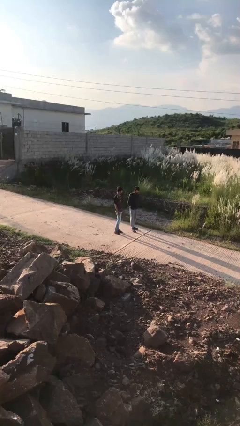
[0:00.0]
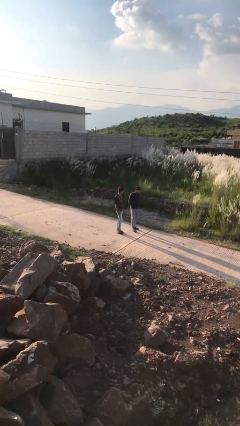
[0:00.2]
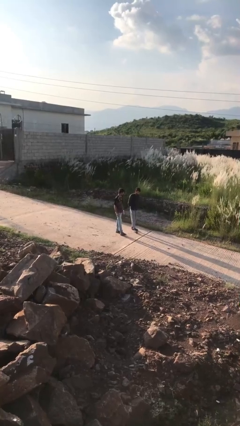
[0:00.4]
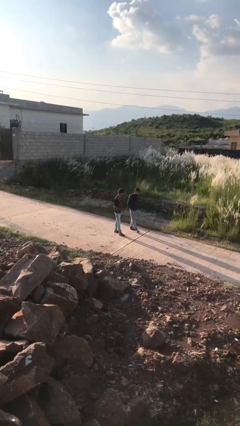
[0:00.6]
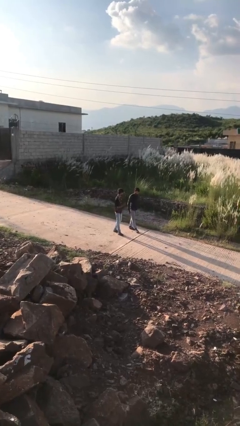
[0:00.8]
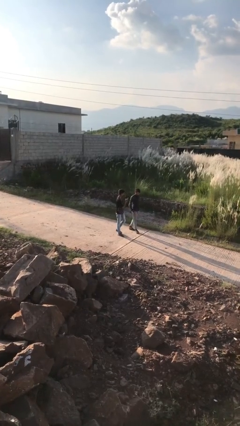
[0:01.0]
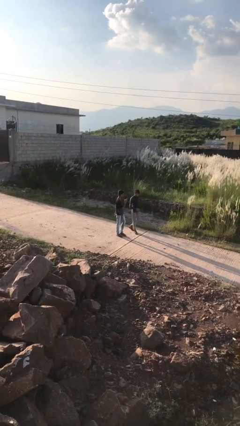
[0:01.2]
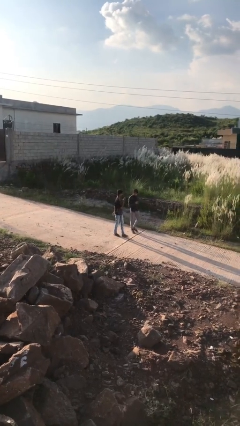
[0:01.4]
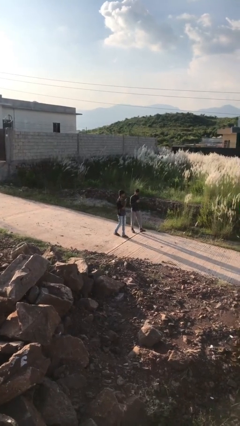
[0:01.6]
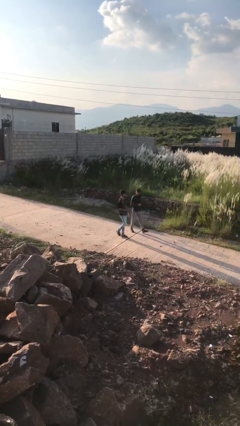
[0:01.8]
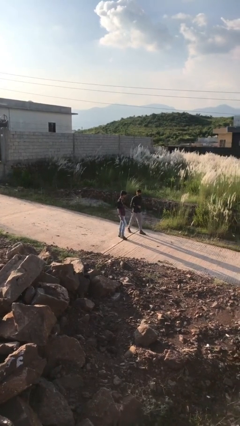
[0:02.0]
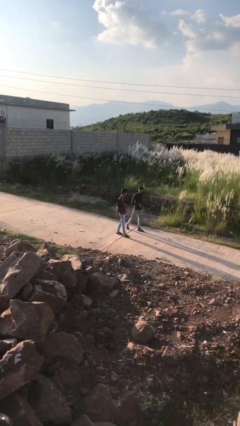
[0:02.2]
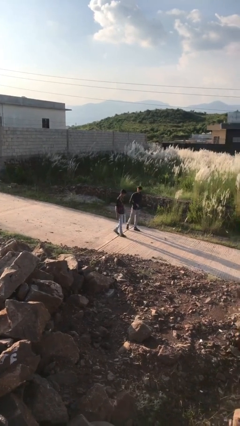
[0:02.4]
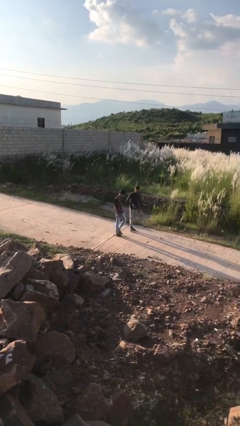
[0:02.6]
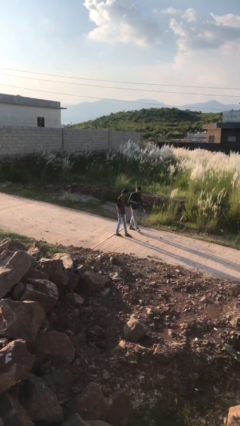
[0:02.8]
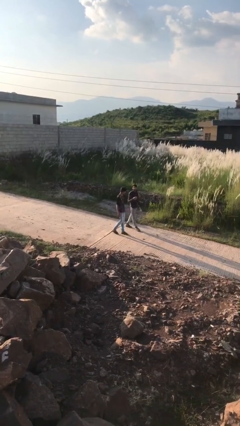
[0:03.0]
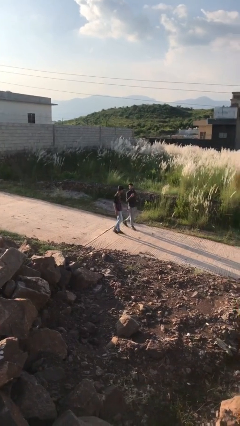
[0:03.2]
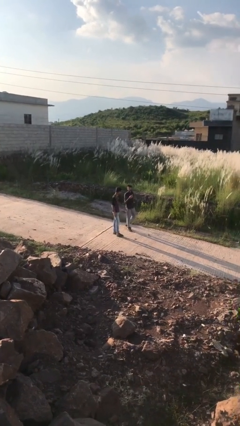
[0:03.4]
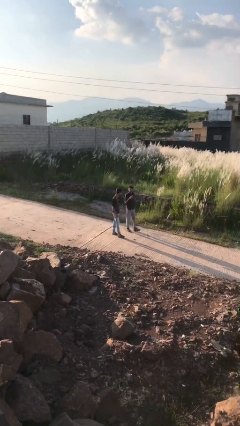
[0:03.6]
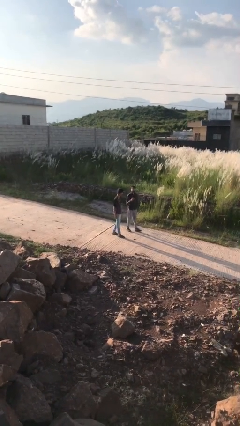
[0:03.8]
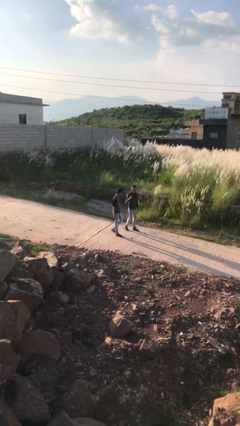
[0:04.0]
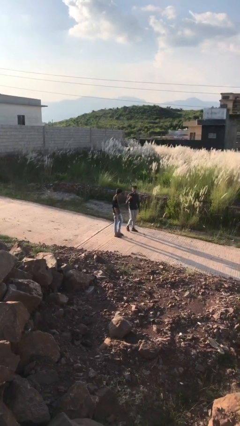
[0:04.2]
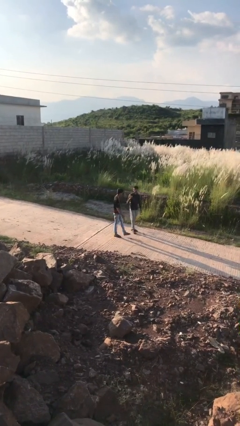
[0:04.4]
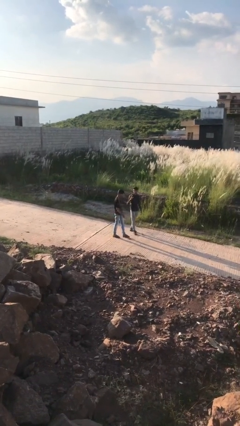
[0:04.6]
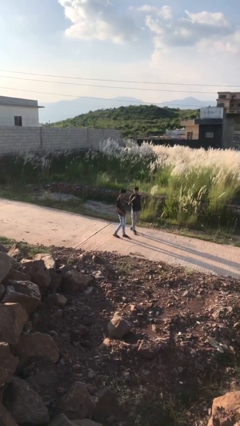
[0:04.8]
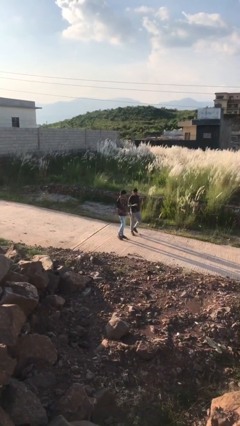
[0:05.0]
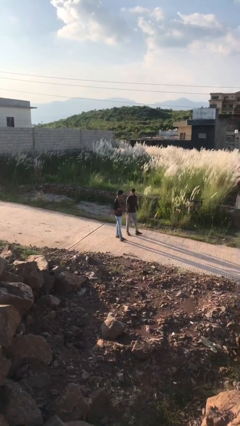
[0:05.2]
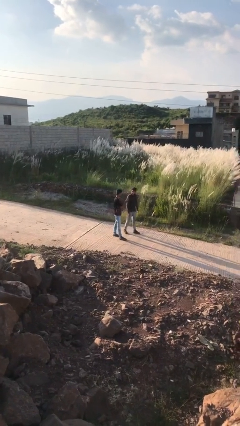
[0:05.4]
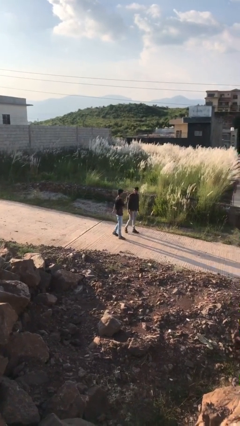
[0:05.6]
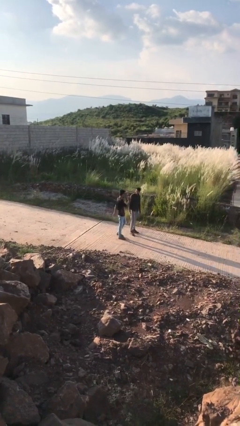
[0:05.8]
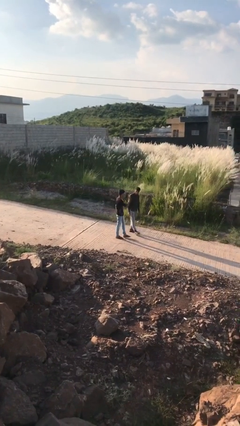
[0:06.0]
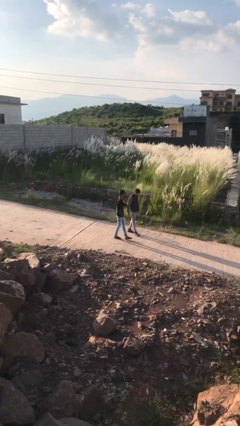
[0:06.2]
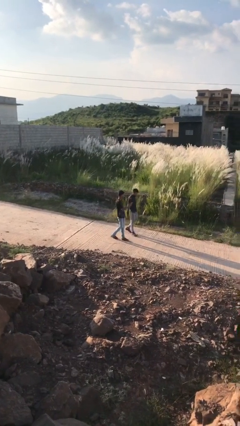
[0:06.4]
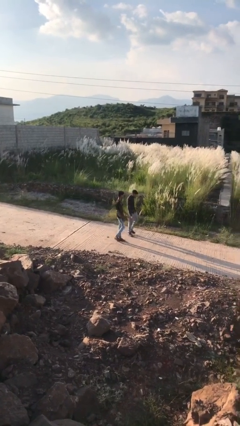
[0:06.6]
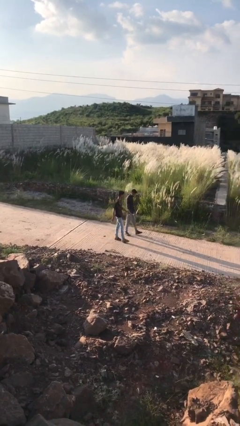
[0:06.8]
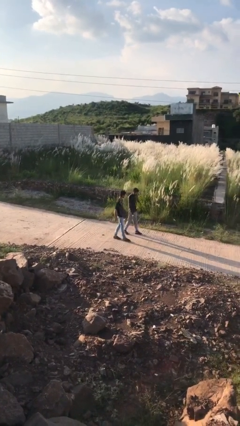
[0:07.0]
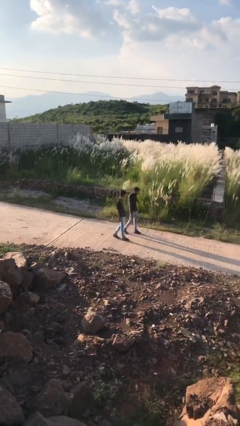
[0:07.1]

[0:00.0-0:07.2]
person talks to person

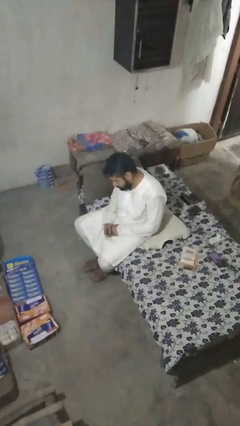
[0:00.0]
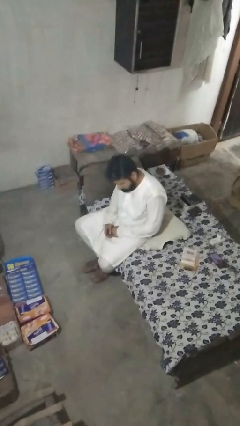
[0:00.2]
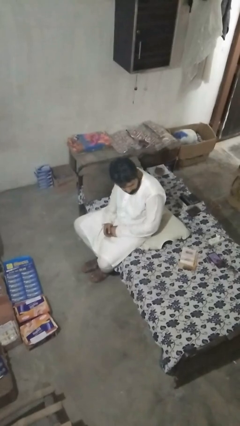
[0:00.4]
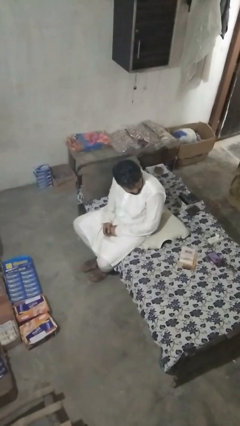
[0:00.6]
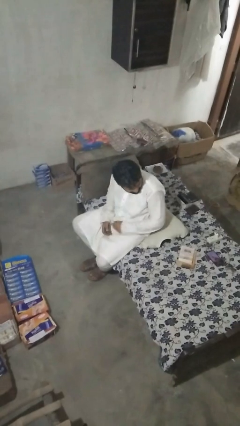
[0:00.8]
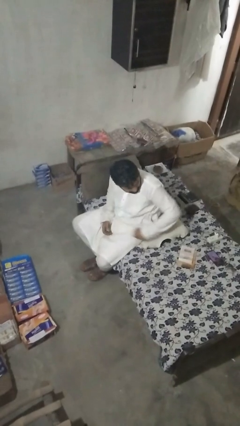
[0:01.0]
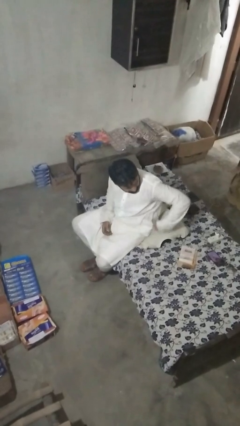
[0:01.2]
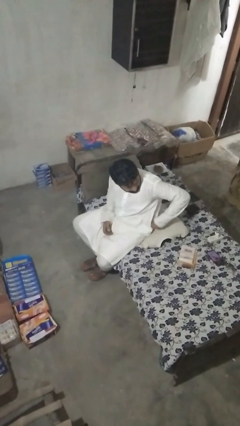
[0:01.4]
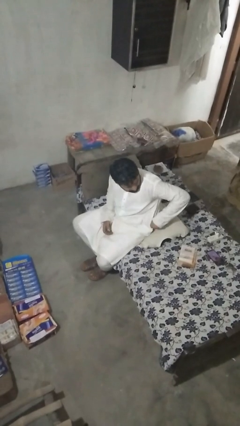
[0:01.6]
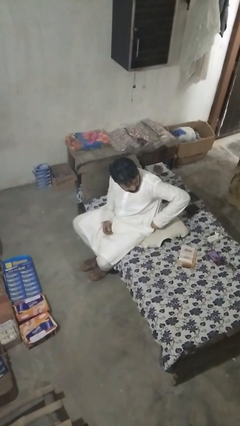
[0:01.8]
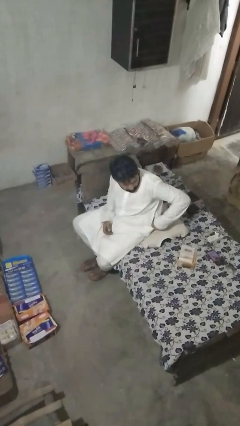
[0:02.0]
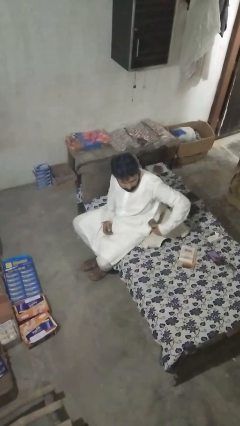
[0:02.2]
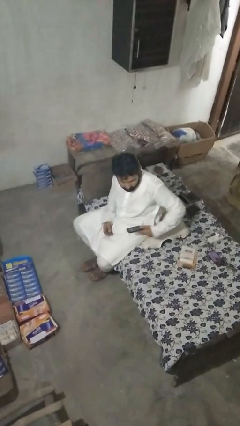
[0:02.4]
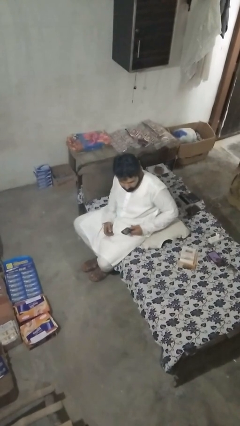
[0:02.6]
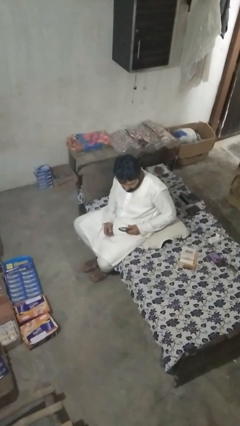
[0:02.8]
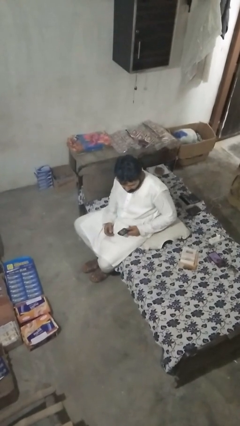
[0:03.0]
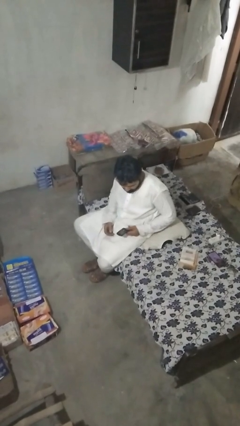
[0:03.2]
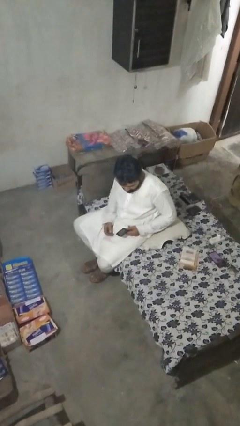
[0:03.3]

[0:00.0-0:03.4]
person takes phone from pocket

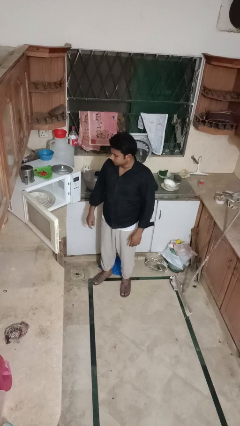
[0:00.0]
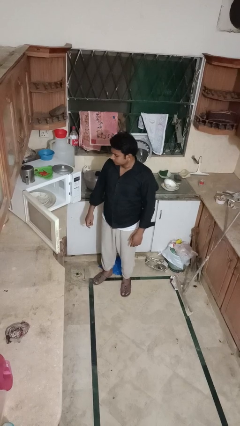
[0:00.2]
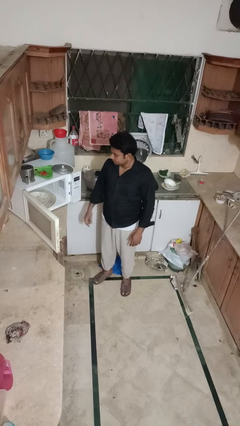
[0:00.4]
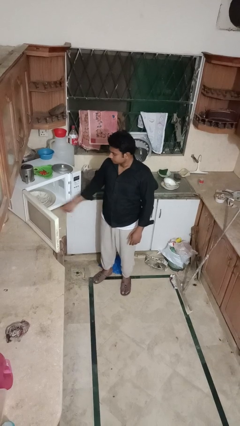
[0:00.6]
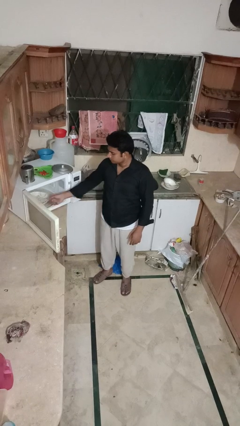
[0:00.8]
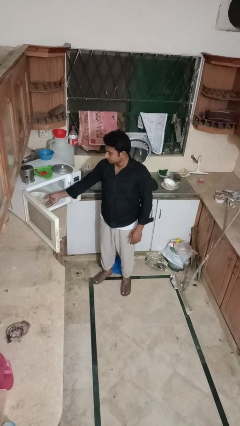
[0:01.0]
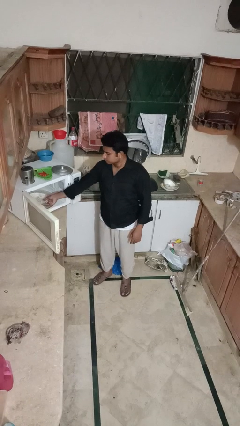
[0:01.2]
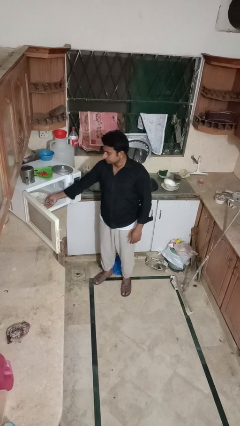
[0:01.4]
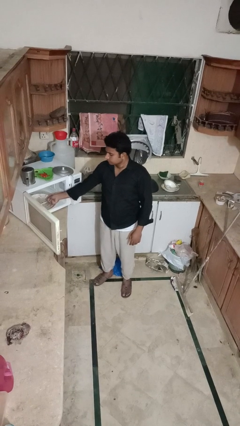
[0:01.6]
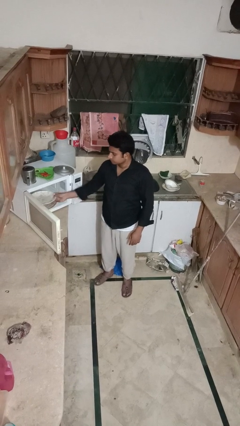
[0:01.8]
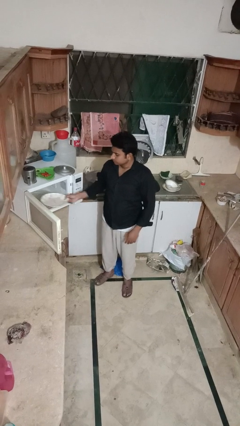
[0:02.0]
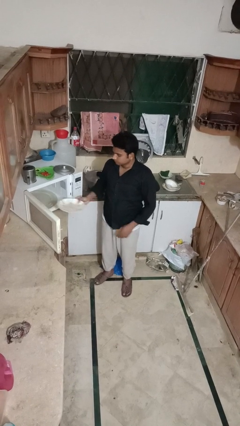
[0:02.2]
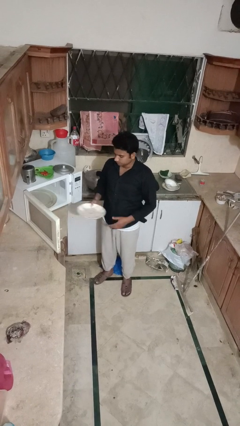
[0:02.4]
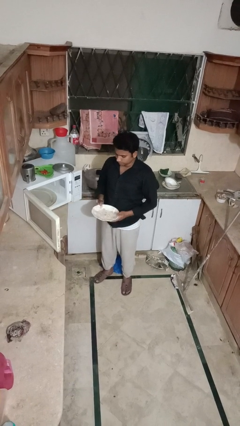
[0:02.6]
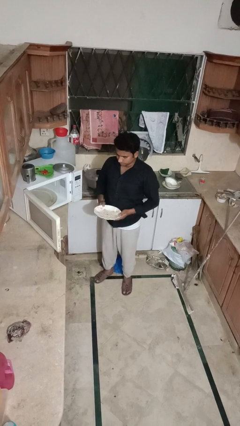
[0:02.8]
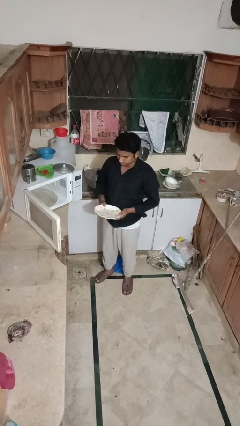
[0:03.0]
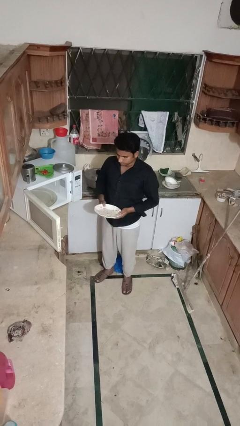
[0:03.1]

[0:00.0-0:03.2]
person takes object from microwave

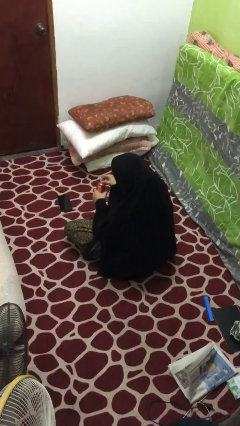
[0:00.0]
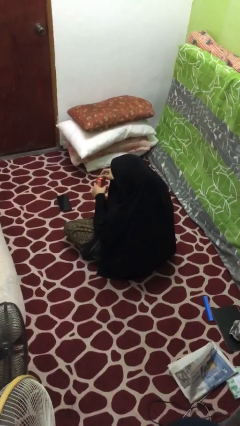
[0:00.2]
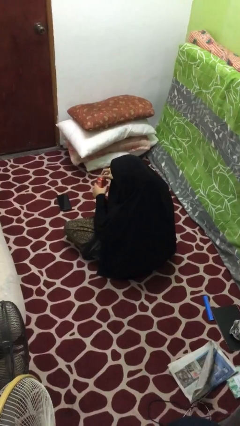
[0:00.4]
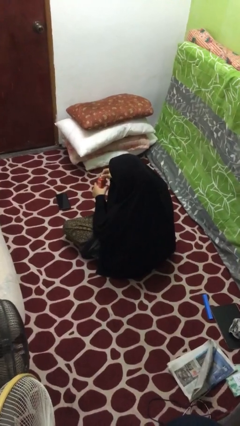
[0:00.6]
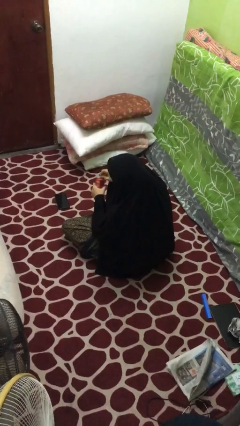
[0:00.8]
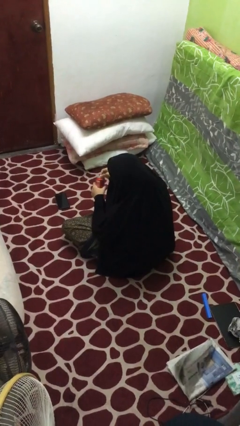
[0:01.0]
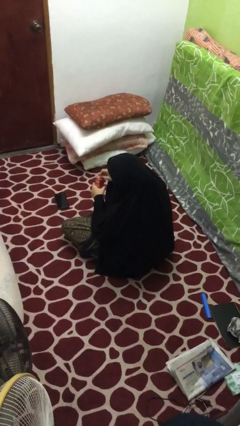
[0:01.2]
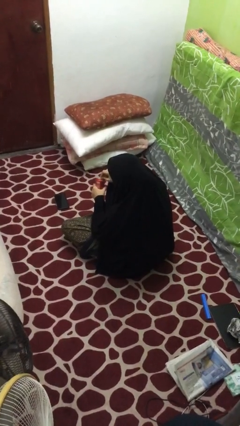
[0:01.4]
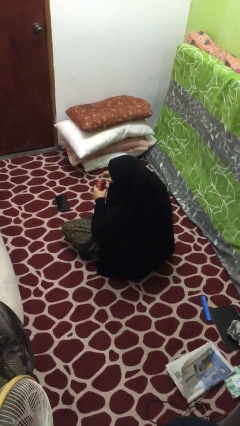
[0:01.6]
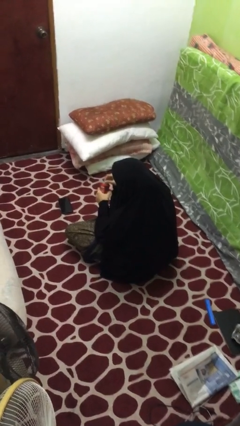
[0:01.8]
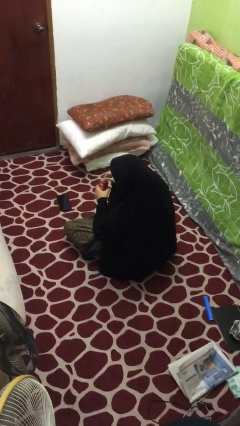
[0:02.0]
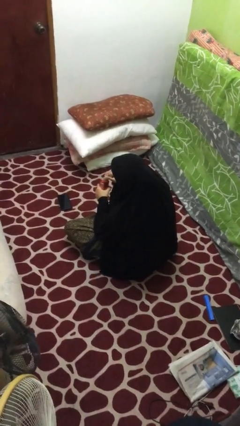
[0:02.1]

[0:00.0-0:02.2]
person opens beverage can

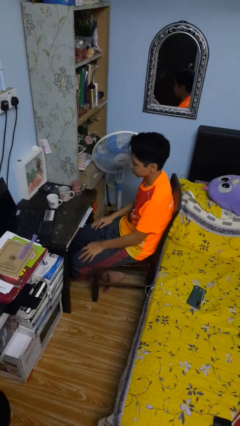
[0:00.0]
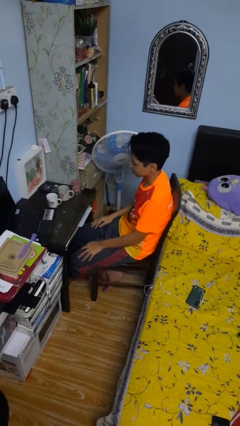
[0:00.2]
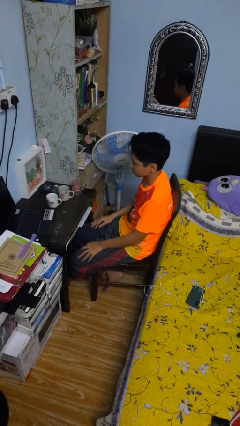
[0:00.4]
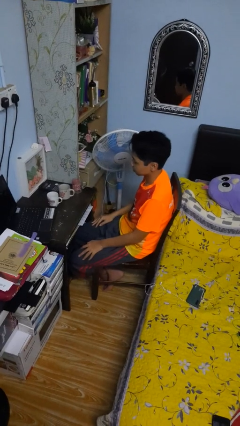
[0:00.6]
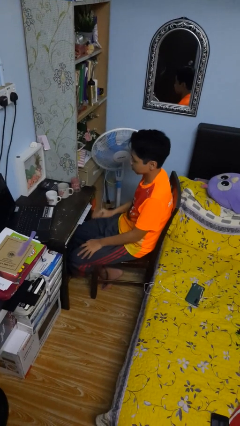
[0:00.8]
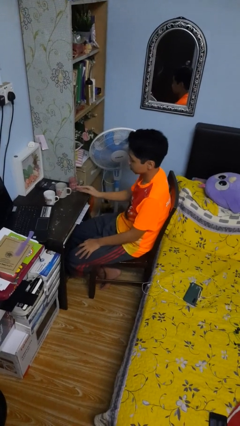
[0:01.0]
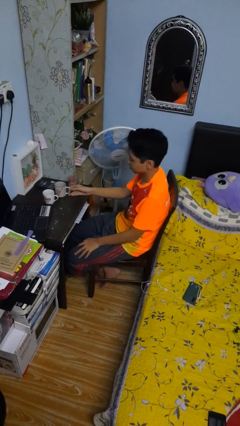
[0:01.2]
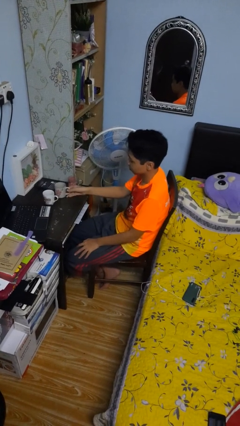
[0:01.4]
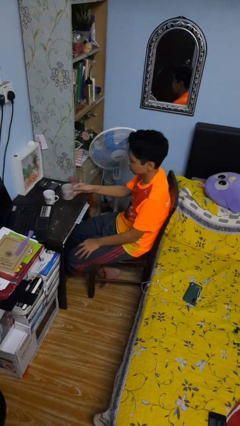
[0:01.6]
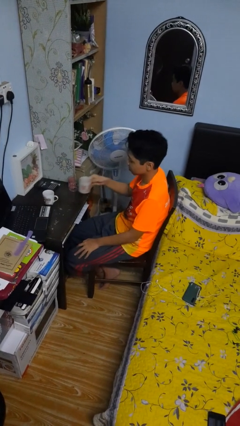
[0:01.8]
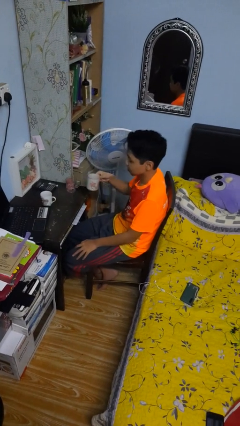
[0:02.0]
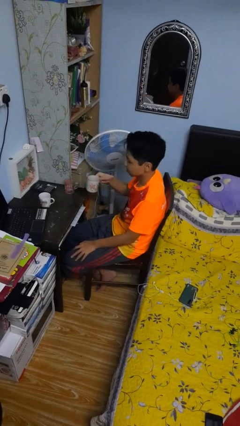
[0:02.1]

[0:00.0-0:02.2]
person picks up object from table
